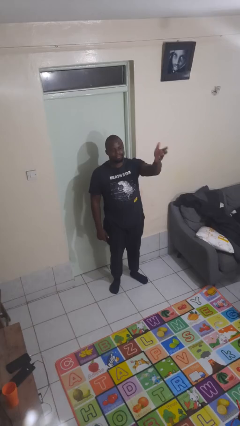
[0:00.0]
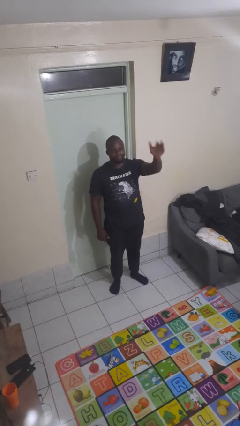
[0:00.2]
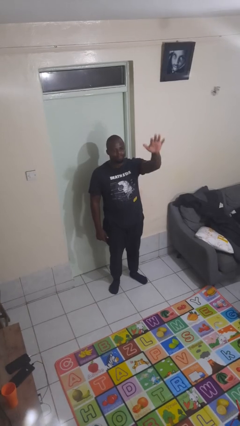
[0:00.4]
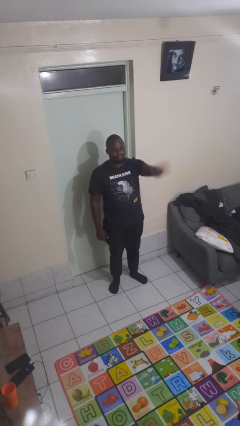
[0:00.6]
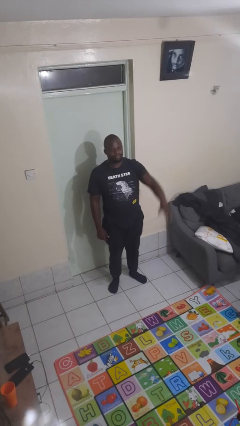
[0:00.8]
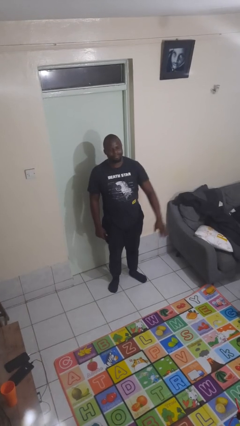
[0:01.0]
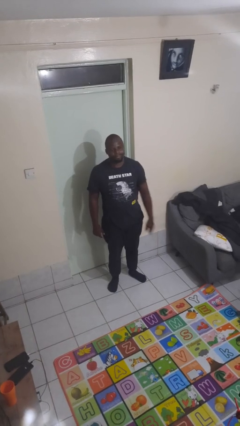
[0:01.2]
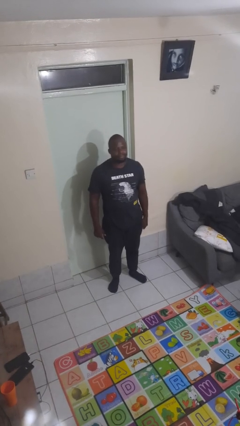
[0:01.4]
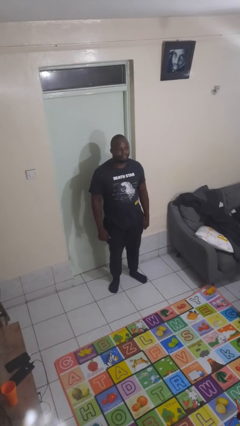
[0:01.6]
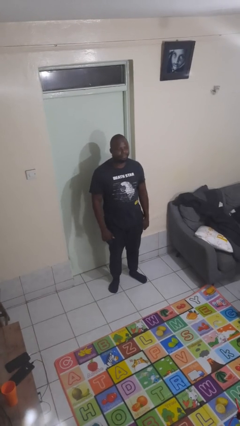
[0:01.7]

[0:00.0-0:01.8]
person gestures swipe down

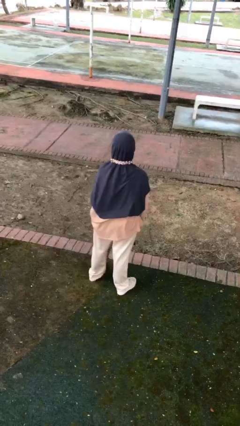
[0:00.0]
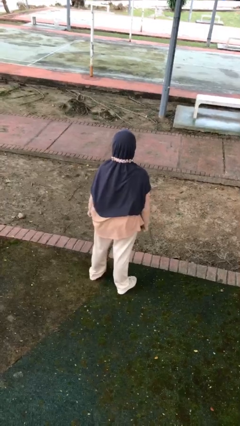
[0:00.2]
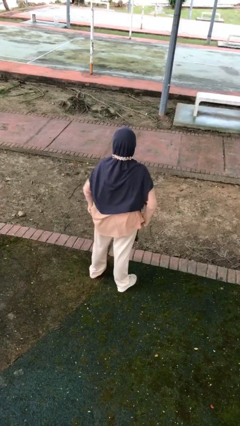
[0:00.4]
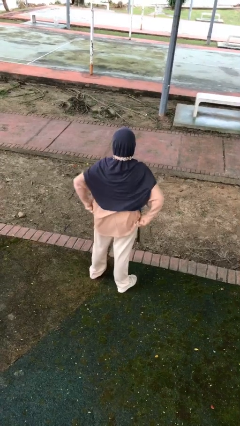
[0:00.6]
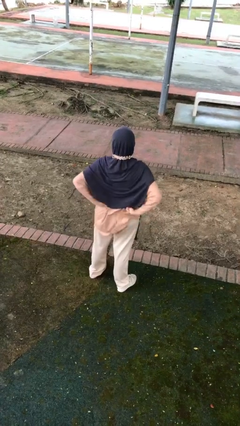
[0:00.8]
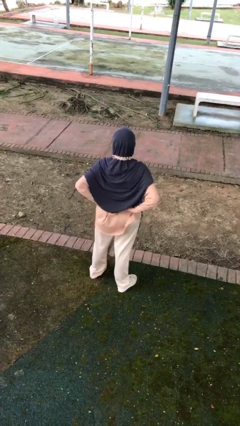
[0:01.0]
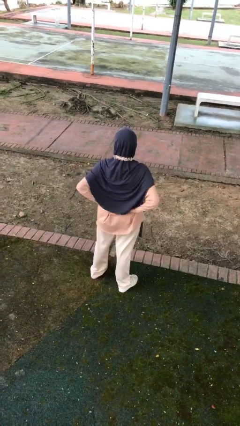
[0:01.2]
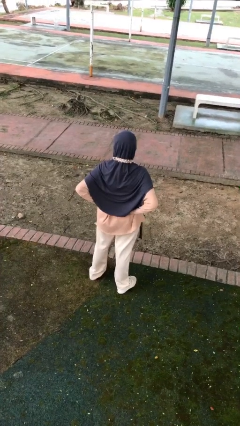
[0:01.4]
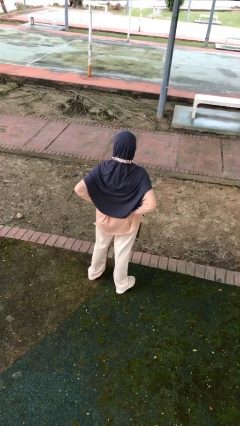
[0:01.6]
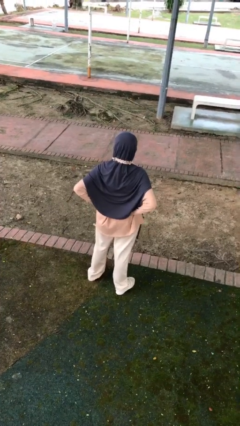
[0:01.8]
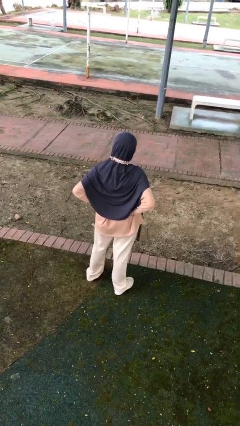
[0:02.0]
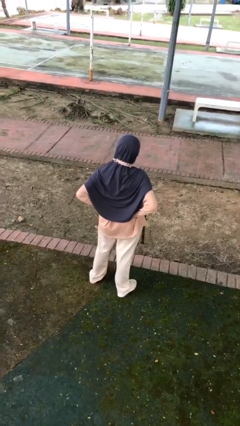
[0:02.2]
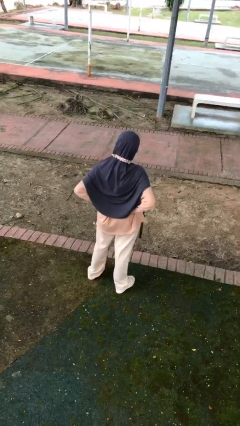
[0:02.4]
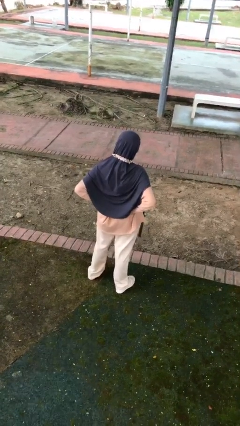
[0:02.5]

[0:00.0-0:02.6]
person stretches back

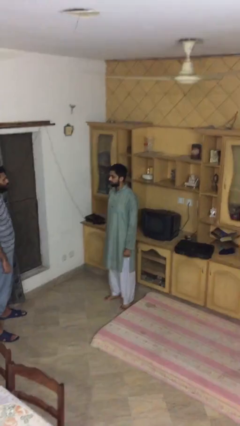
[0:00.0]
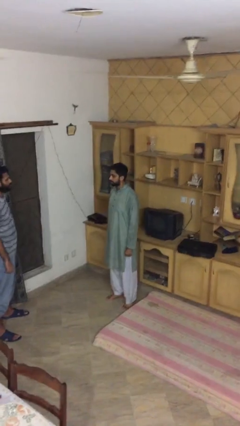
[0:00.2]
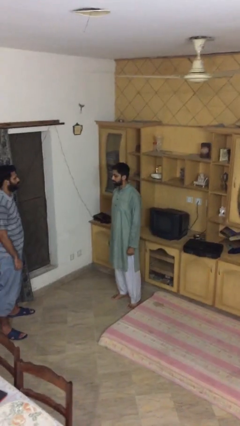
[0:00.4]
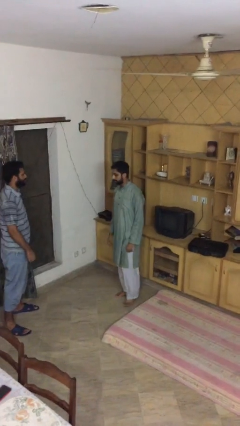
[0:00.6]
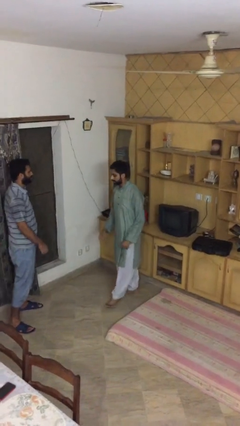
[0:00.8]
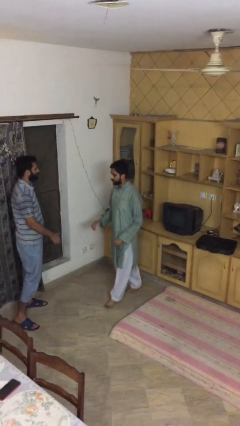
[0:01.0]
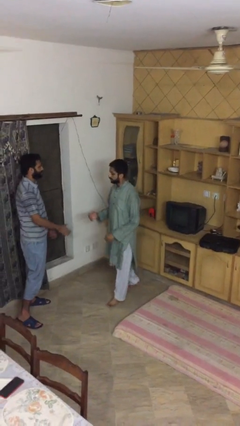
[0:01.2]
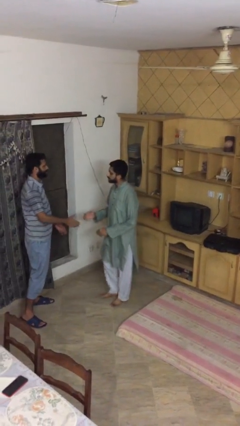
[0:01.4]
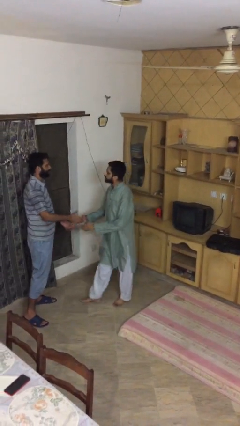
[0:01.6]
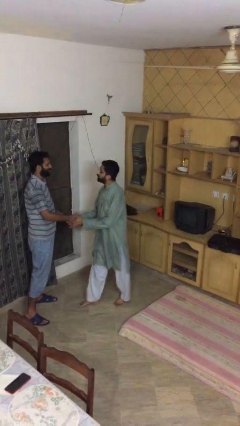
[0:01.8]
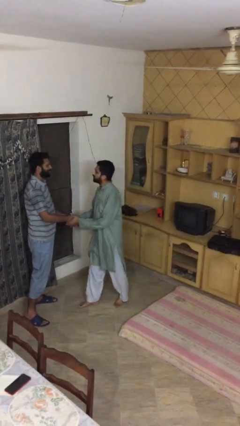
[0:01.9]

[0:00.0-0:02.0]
person shakes hand

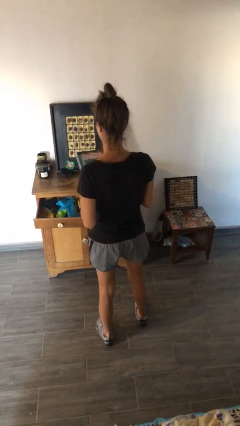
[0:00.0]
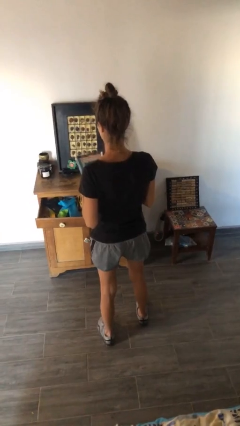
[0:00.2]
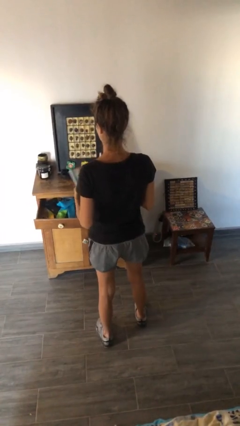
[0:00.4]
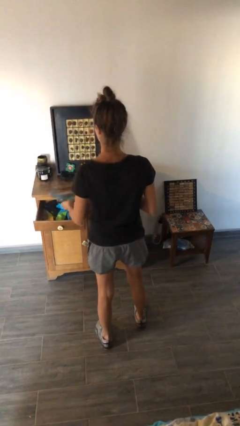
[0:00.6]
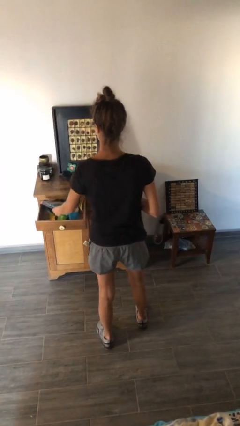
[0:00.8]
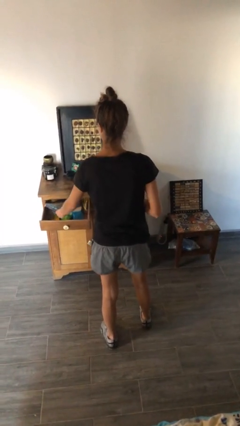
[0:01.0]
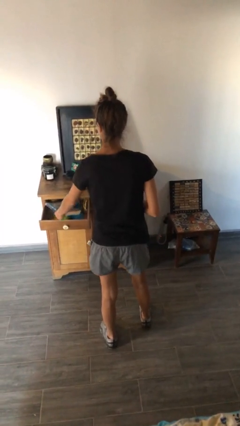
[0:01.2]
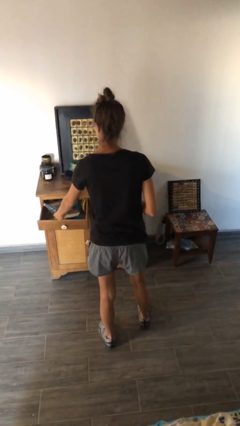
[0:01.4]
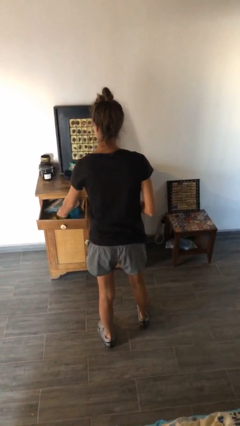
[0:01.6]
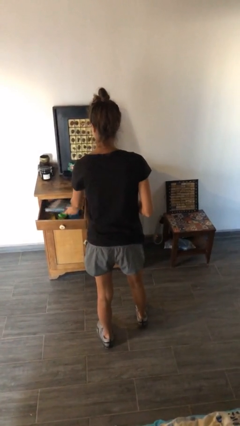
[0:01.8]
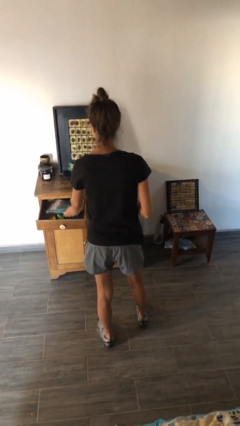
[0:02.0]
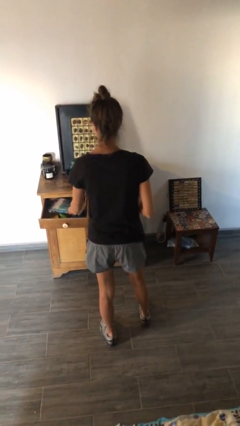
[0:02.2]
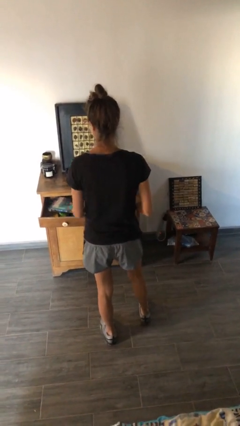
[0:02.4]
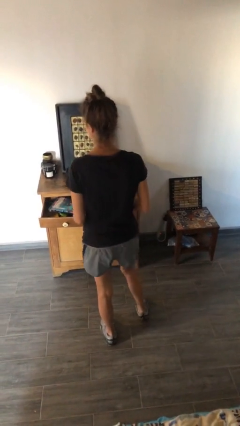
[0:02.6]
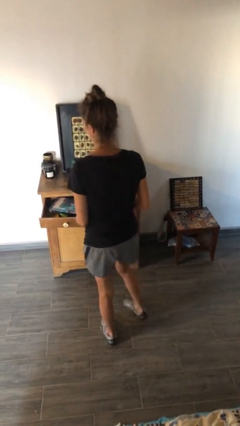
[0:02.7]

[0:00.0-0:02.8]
person puts down object into cabinet

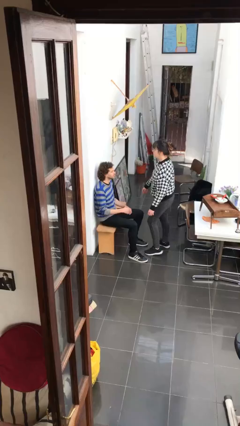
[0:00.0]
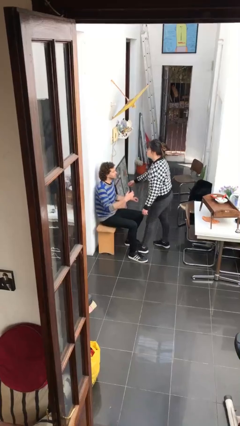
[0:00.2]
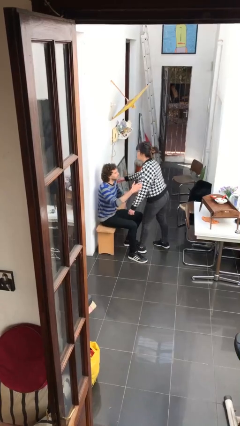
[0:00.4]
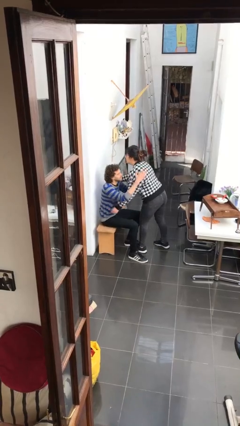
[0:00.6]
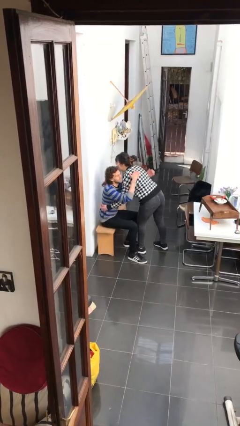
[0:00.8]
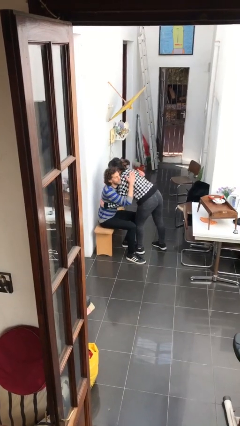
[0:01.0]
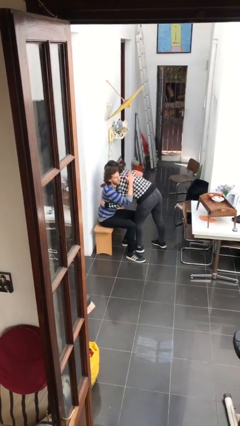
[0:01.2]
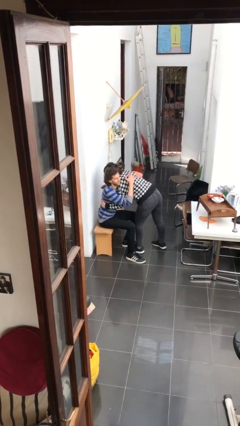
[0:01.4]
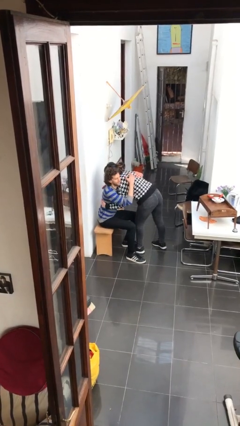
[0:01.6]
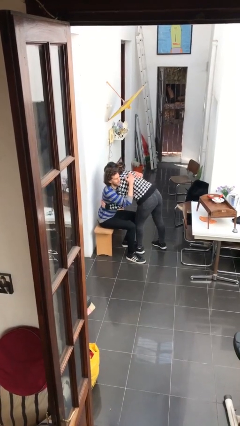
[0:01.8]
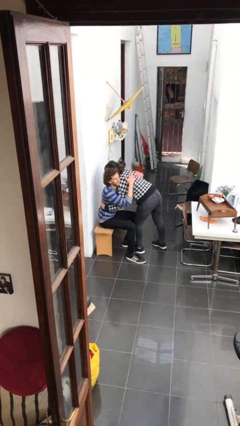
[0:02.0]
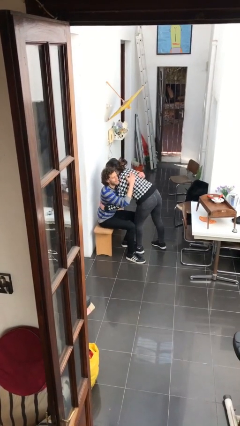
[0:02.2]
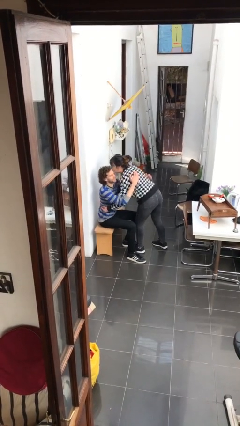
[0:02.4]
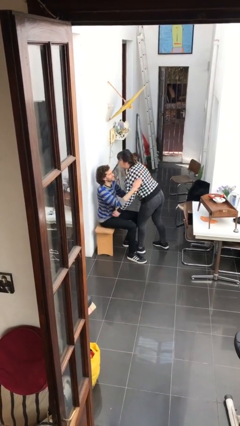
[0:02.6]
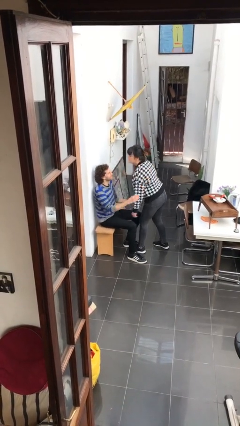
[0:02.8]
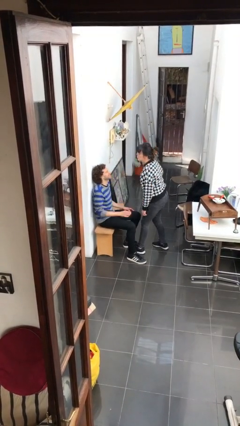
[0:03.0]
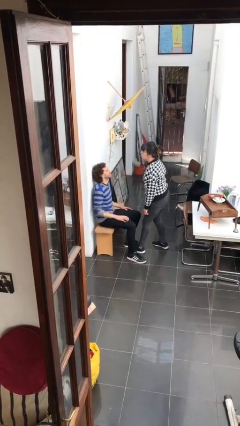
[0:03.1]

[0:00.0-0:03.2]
person embraces person

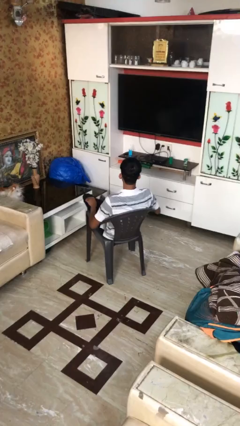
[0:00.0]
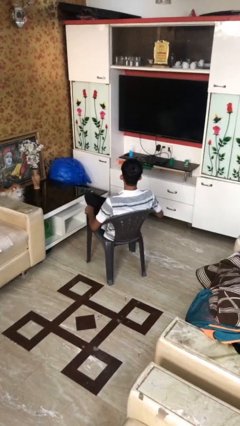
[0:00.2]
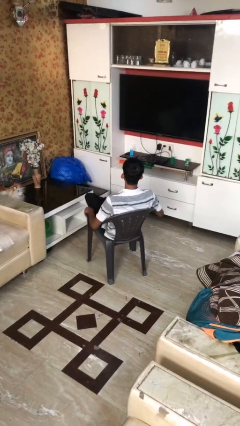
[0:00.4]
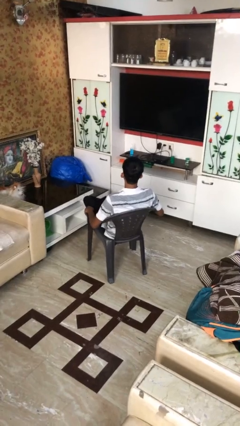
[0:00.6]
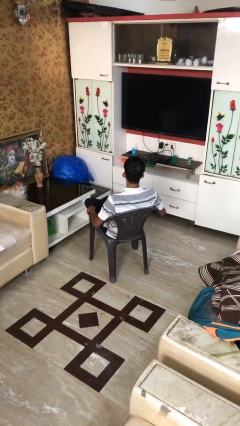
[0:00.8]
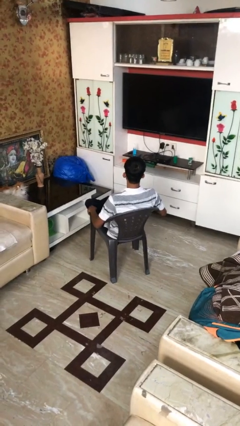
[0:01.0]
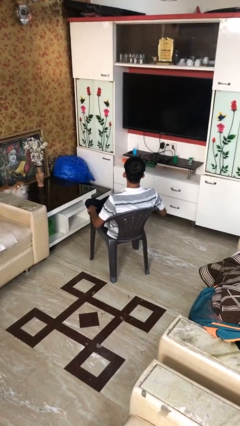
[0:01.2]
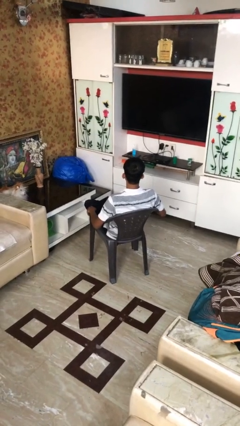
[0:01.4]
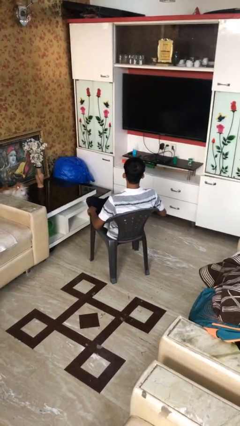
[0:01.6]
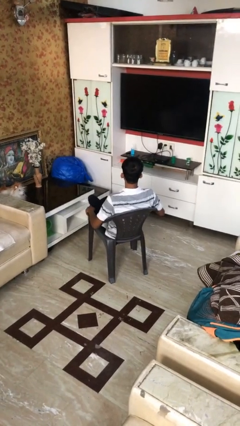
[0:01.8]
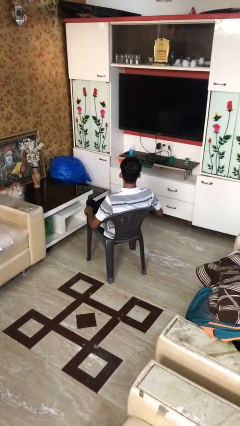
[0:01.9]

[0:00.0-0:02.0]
person crosses legs

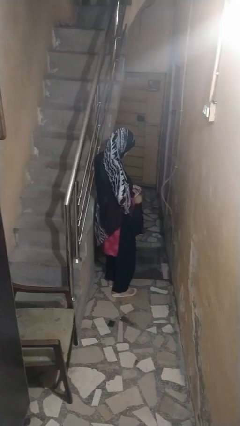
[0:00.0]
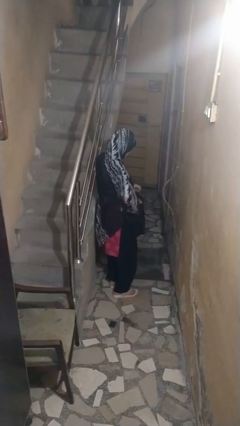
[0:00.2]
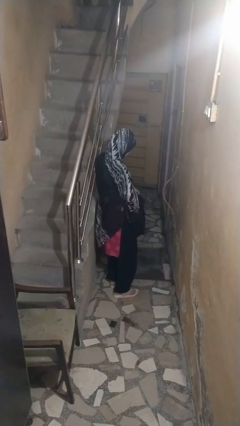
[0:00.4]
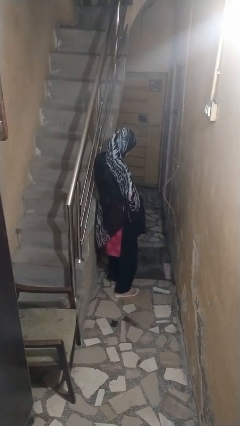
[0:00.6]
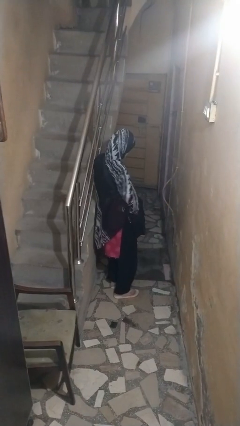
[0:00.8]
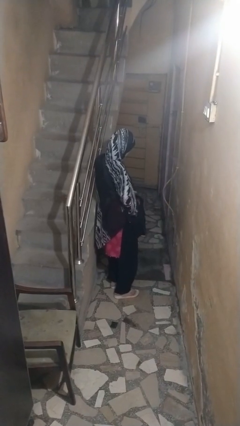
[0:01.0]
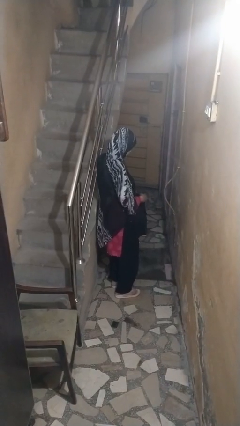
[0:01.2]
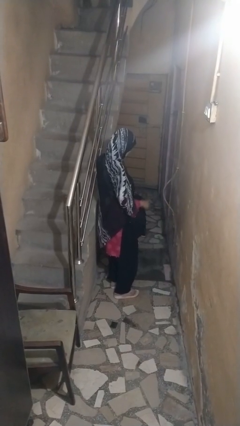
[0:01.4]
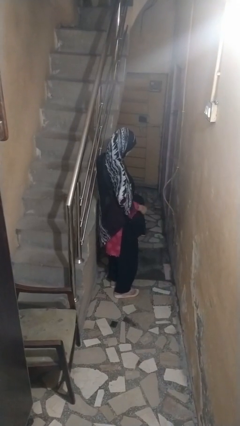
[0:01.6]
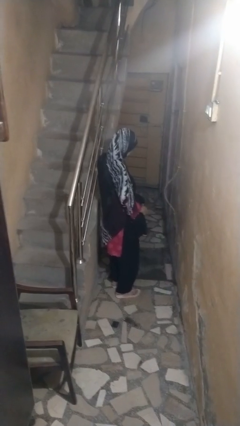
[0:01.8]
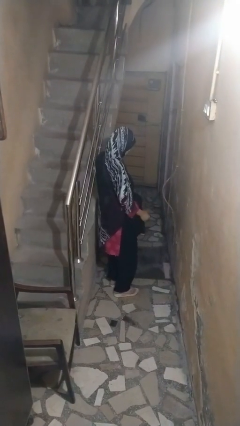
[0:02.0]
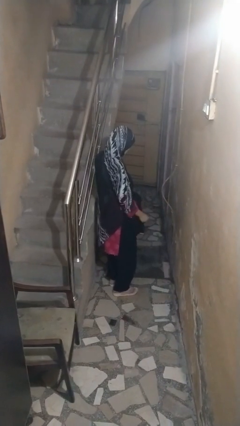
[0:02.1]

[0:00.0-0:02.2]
person puts object into backpack

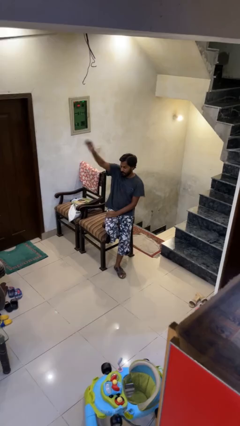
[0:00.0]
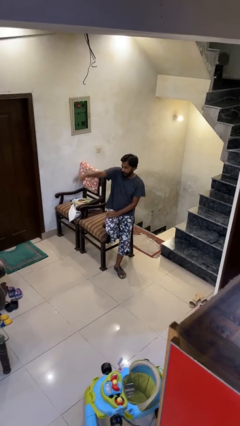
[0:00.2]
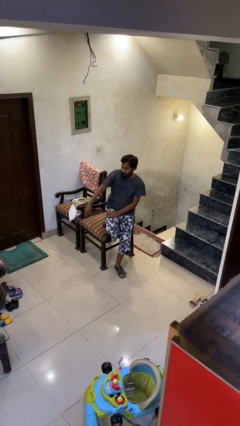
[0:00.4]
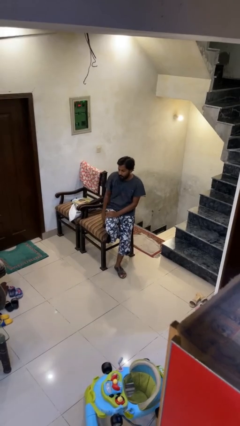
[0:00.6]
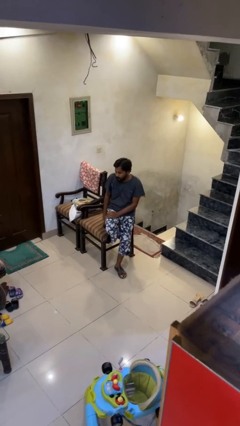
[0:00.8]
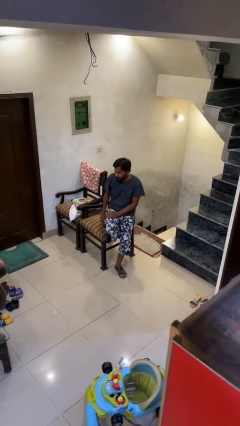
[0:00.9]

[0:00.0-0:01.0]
person gestures lower hand
